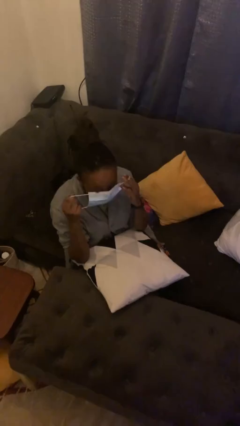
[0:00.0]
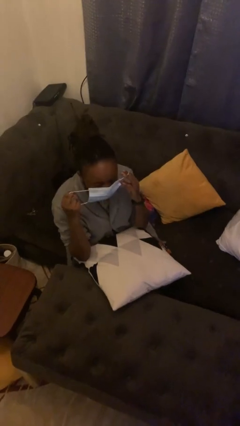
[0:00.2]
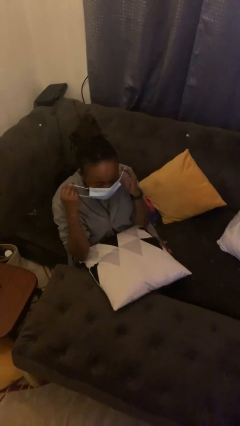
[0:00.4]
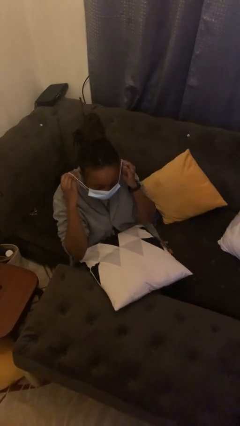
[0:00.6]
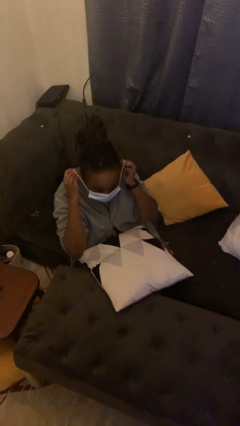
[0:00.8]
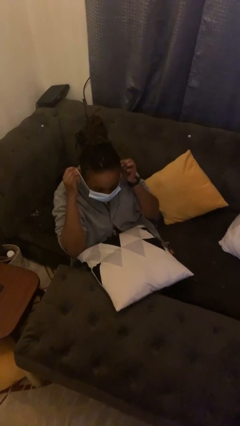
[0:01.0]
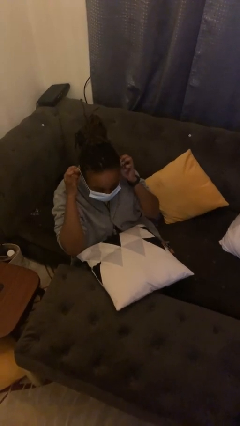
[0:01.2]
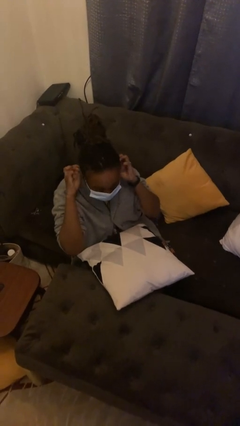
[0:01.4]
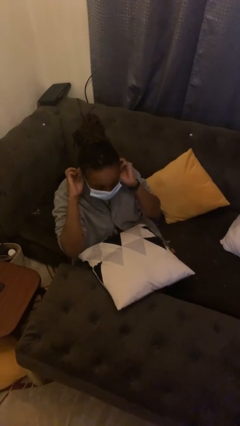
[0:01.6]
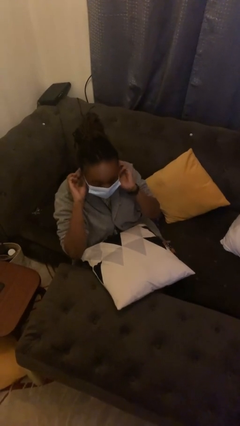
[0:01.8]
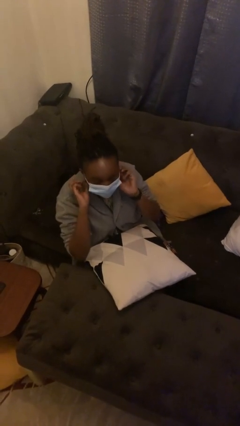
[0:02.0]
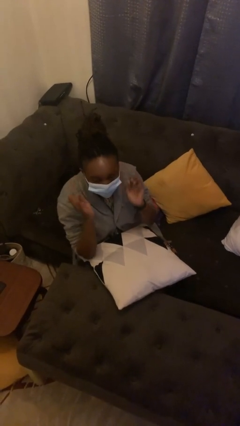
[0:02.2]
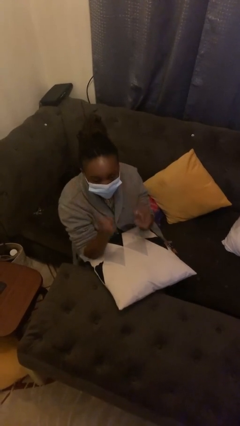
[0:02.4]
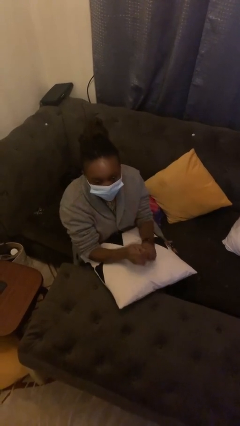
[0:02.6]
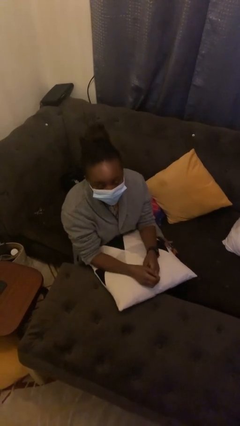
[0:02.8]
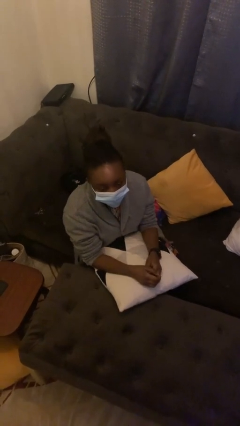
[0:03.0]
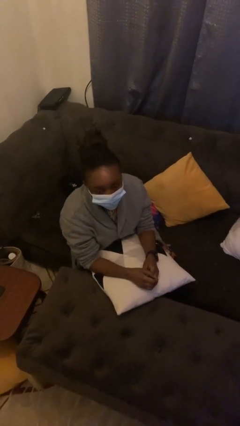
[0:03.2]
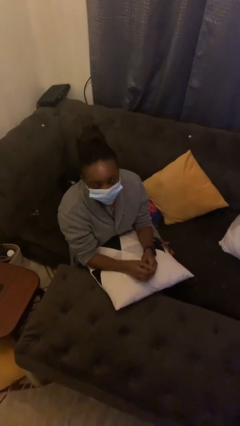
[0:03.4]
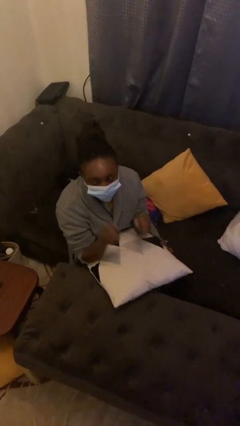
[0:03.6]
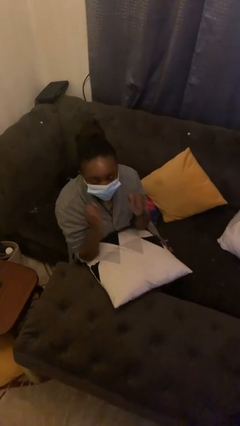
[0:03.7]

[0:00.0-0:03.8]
person puts on facemask

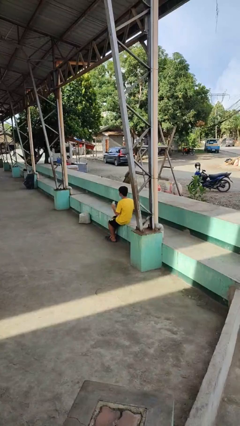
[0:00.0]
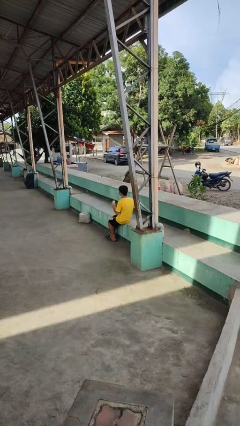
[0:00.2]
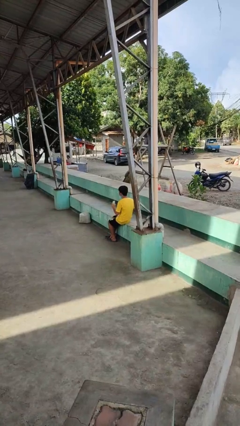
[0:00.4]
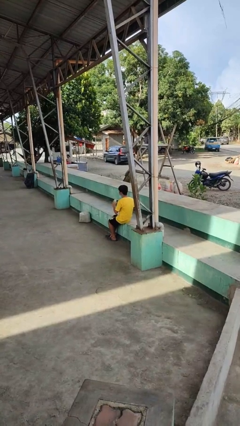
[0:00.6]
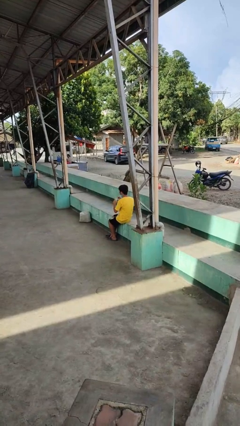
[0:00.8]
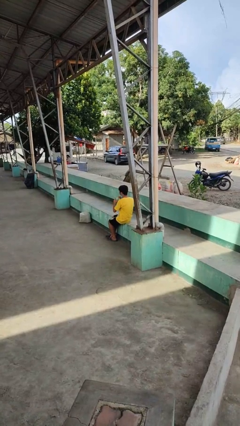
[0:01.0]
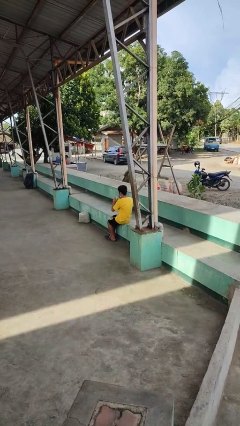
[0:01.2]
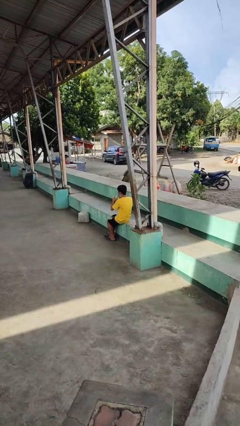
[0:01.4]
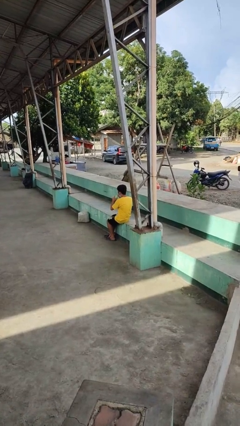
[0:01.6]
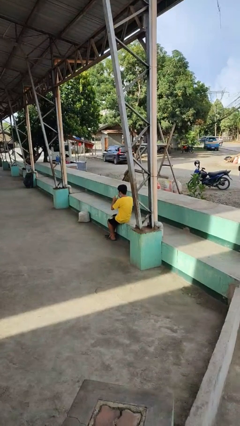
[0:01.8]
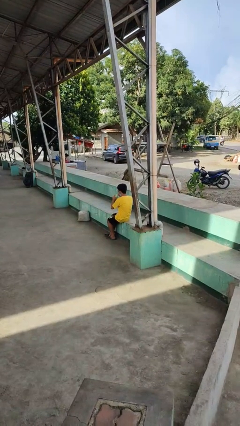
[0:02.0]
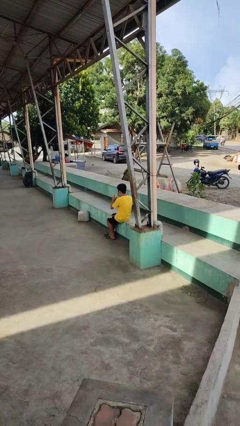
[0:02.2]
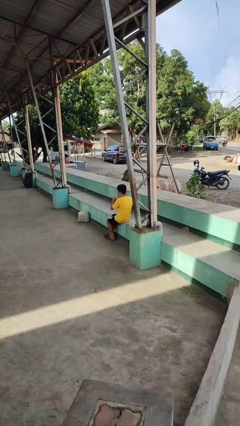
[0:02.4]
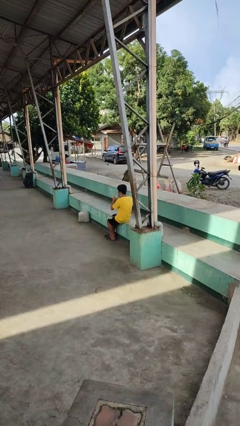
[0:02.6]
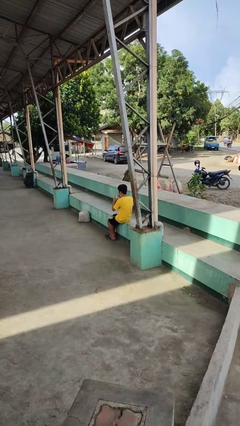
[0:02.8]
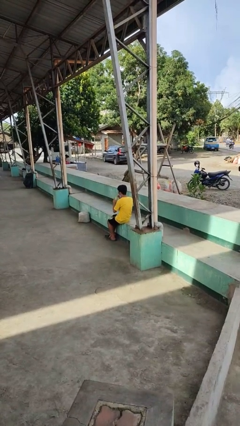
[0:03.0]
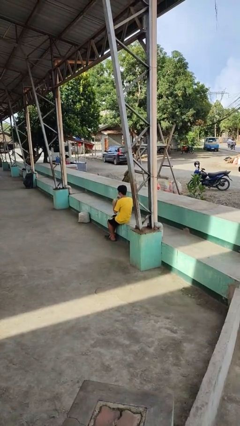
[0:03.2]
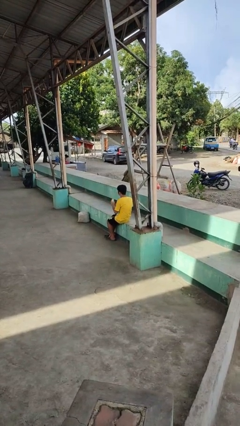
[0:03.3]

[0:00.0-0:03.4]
person drinks from straw

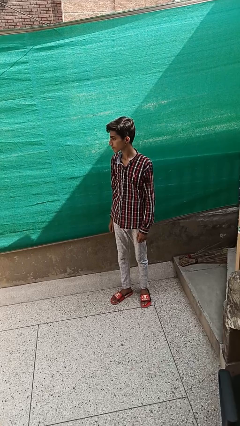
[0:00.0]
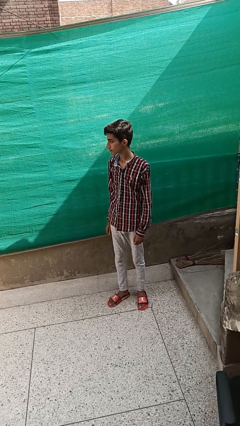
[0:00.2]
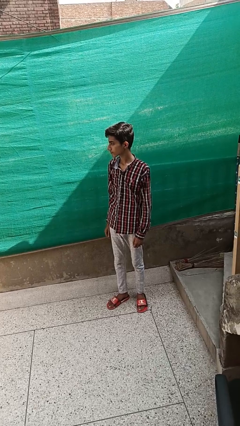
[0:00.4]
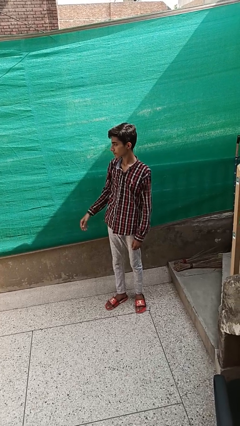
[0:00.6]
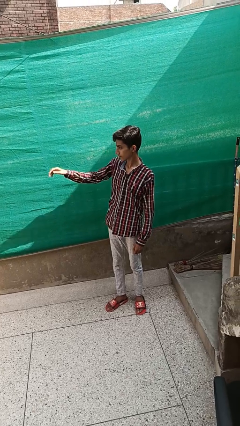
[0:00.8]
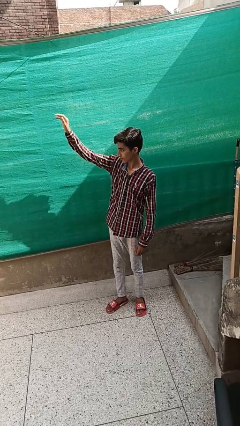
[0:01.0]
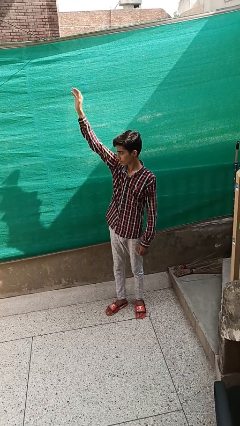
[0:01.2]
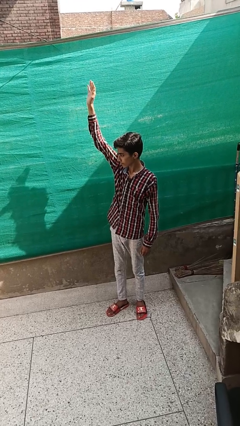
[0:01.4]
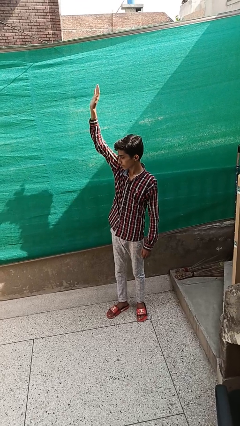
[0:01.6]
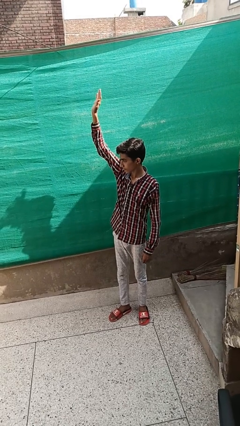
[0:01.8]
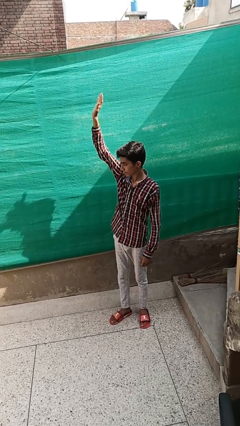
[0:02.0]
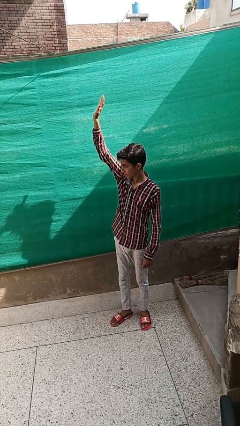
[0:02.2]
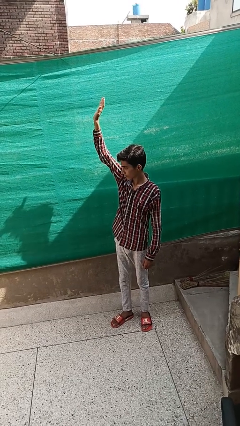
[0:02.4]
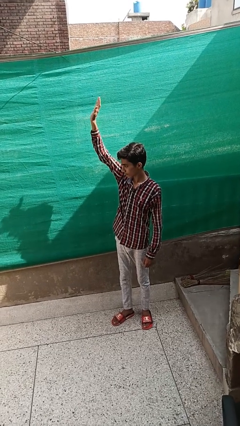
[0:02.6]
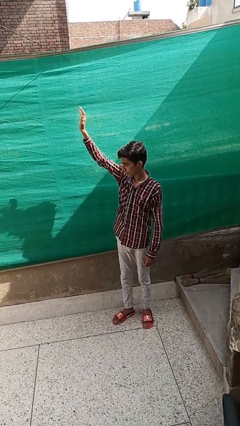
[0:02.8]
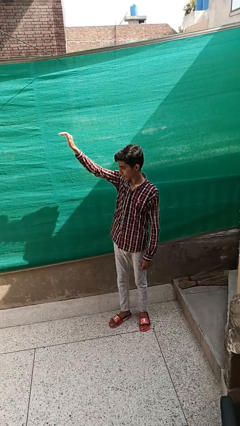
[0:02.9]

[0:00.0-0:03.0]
person gestures raise hand

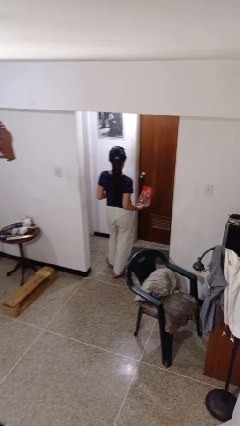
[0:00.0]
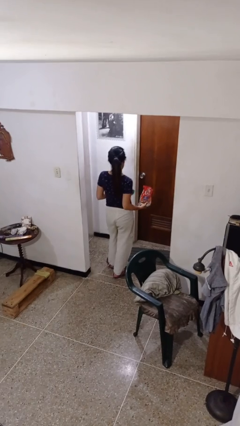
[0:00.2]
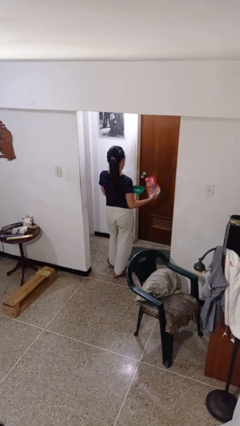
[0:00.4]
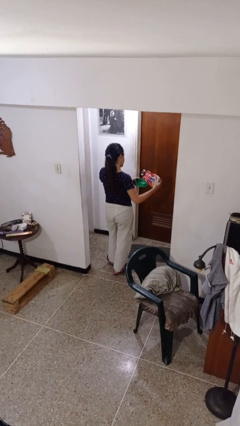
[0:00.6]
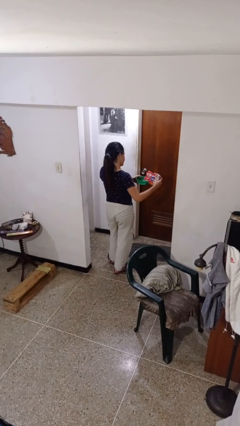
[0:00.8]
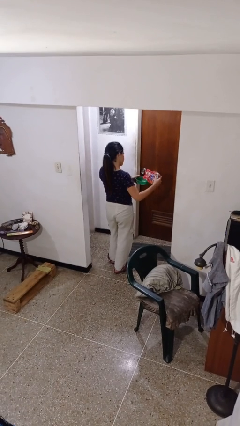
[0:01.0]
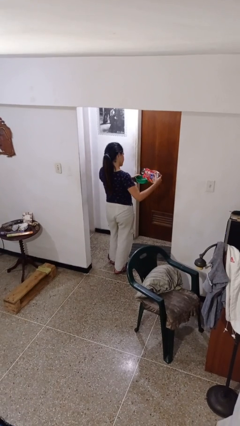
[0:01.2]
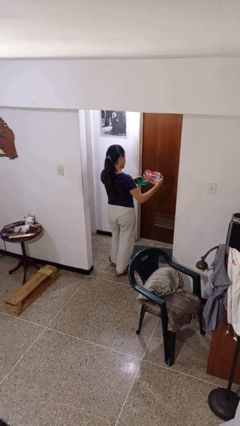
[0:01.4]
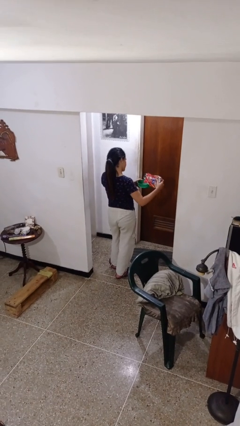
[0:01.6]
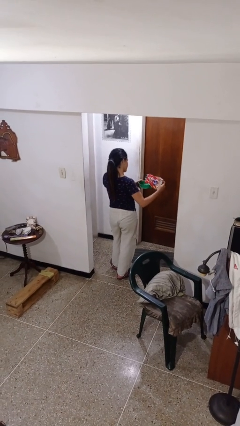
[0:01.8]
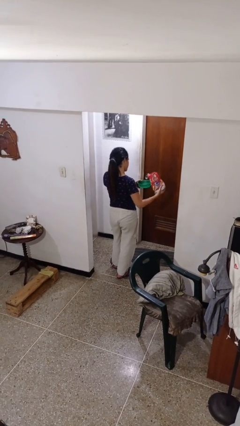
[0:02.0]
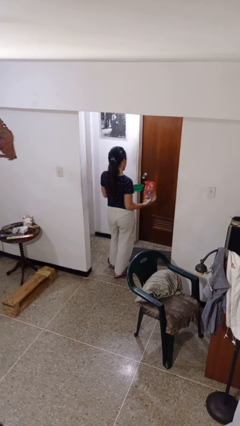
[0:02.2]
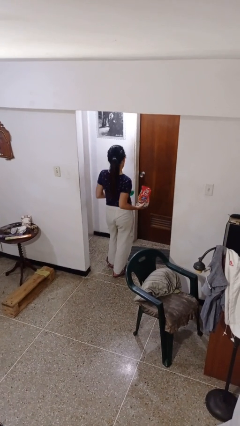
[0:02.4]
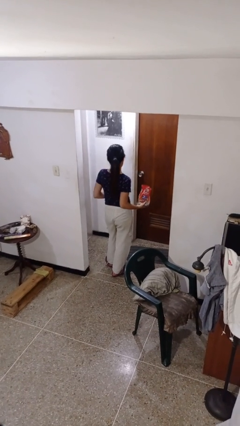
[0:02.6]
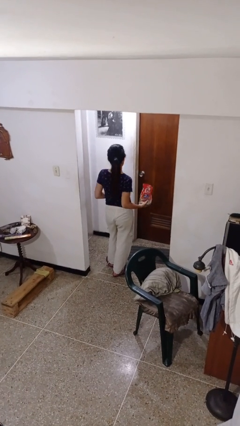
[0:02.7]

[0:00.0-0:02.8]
person pours into bowl

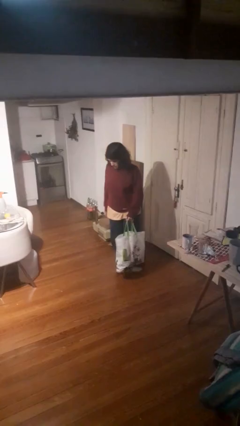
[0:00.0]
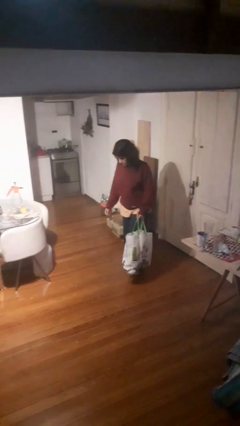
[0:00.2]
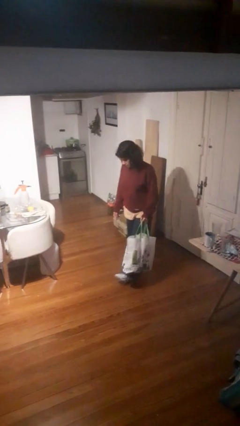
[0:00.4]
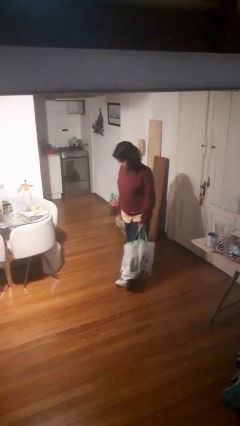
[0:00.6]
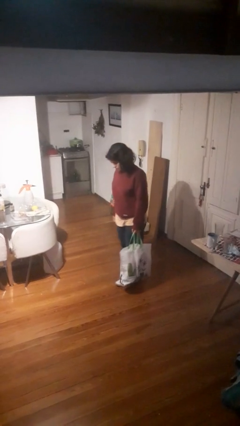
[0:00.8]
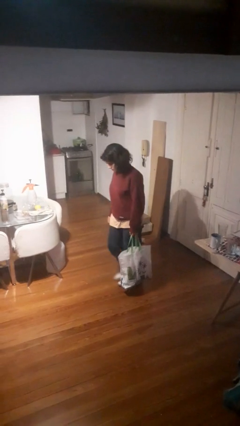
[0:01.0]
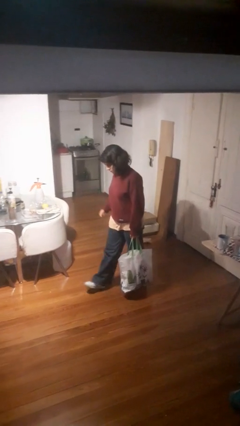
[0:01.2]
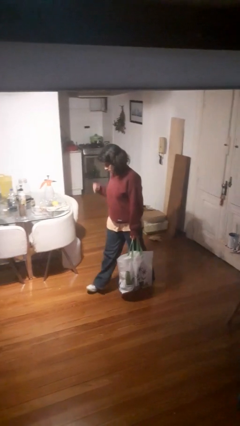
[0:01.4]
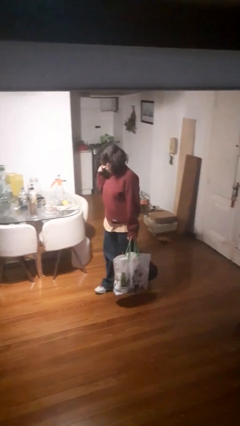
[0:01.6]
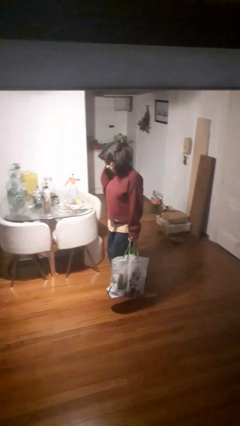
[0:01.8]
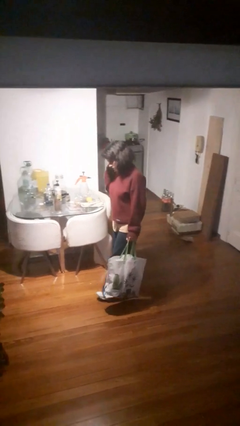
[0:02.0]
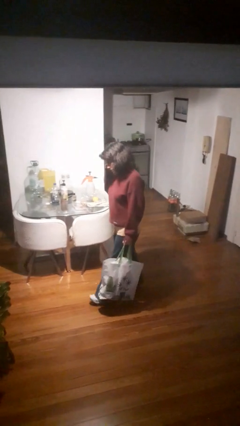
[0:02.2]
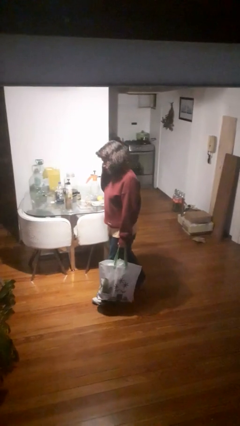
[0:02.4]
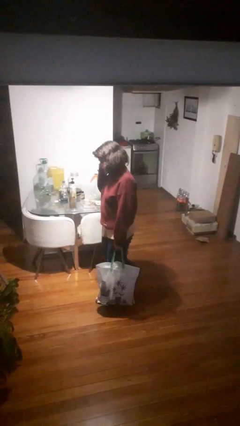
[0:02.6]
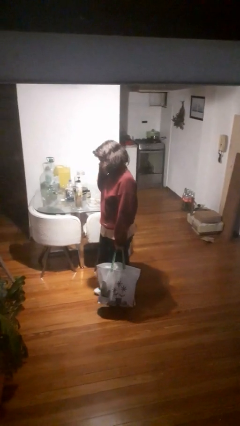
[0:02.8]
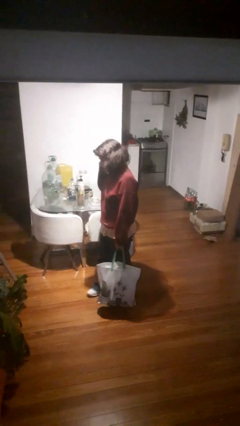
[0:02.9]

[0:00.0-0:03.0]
person carries groceries

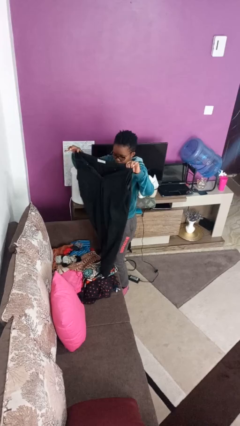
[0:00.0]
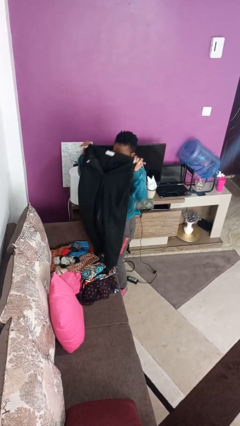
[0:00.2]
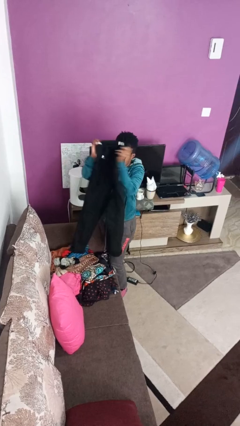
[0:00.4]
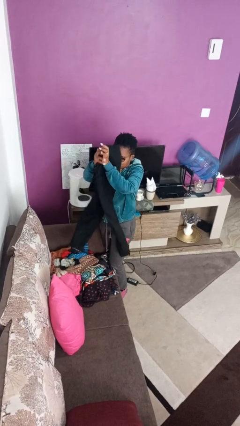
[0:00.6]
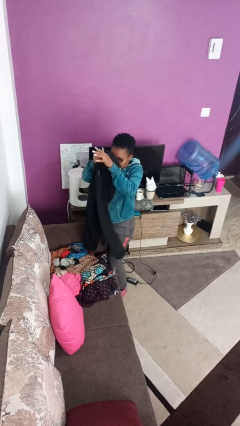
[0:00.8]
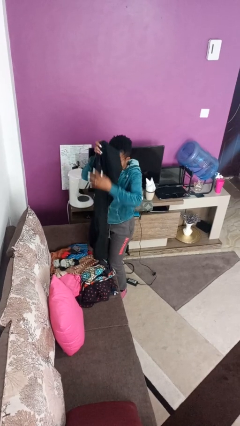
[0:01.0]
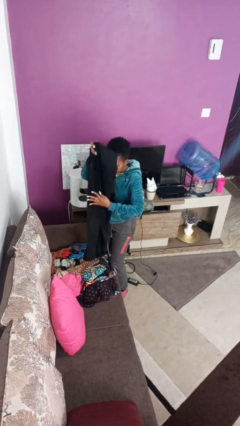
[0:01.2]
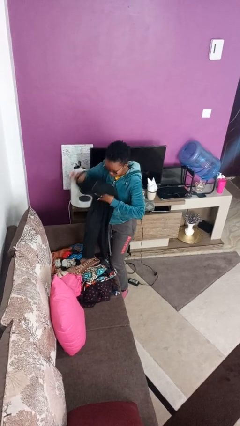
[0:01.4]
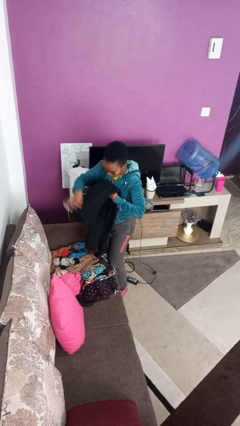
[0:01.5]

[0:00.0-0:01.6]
person folds pants
